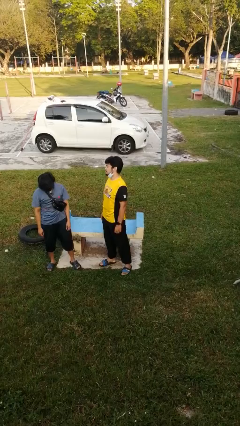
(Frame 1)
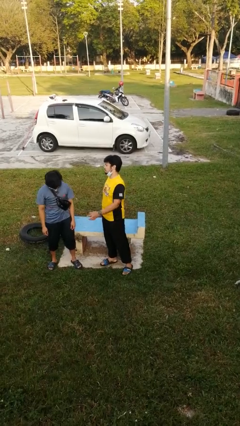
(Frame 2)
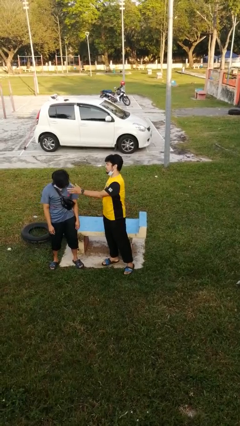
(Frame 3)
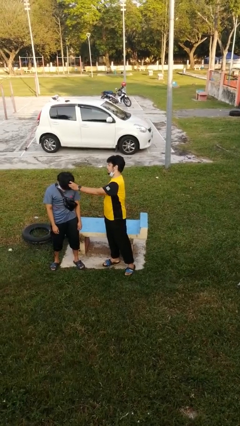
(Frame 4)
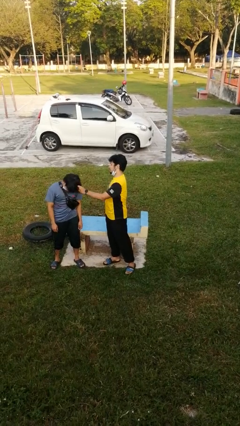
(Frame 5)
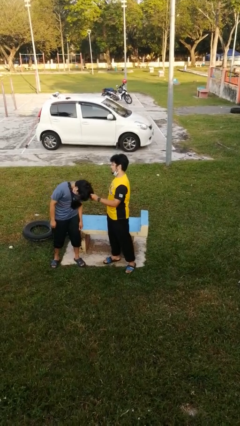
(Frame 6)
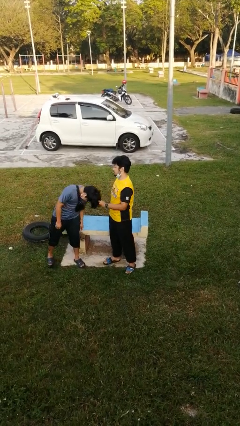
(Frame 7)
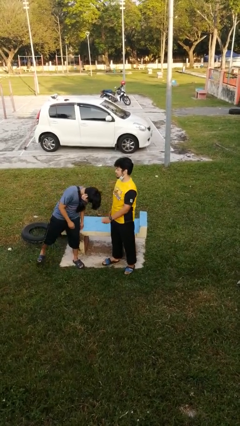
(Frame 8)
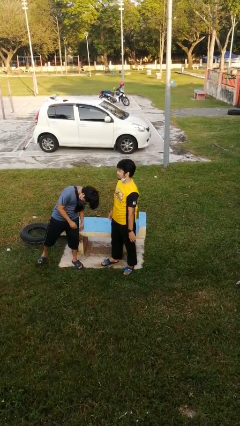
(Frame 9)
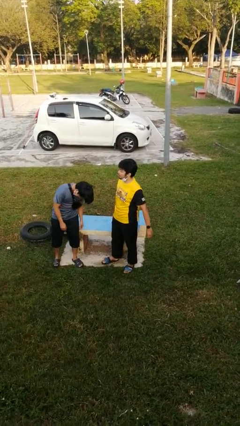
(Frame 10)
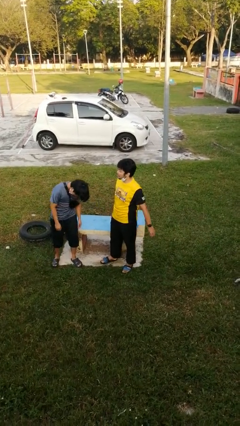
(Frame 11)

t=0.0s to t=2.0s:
person grabs person by hair

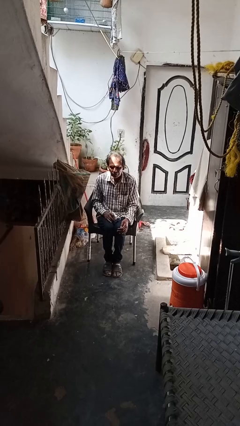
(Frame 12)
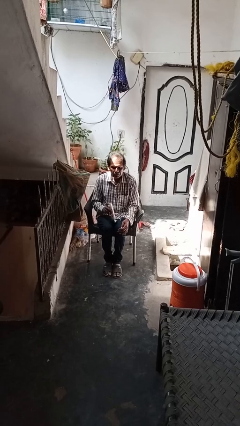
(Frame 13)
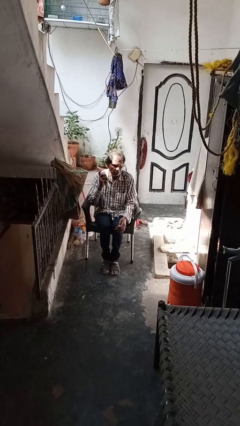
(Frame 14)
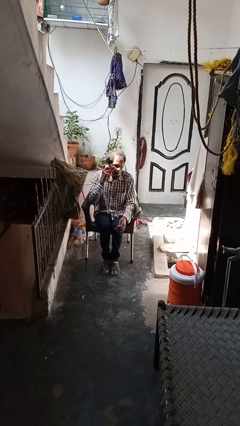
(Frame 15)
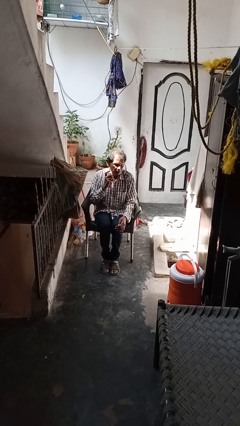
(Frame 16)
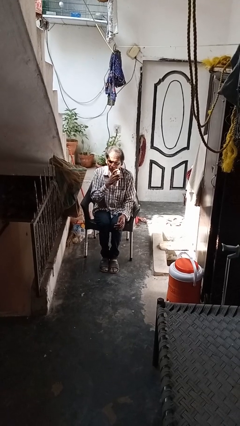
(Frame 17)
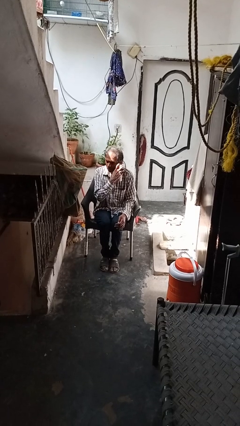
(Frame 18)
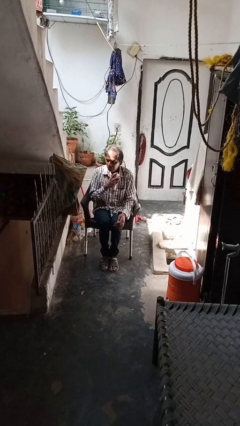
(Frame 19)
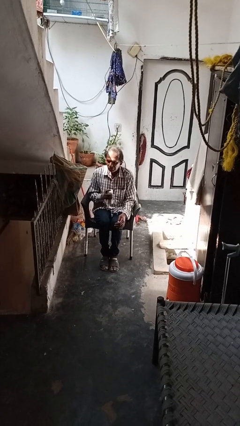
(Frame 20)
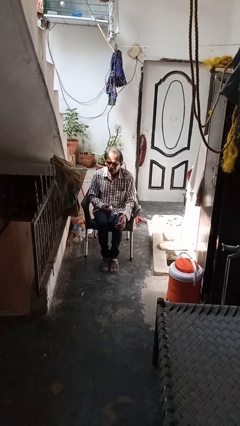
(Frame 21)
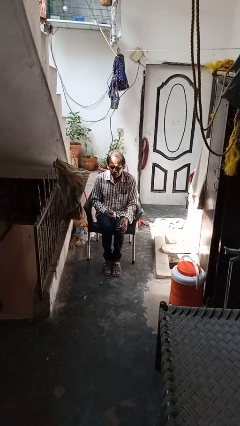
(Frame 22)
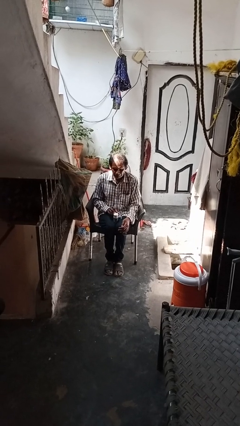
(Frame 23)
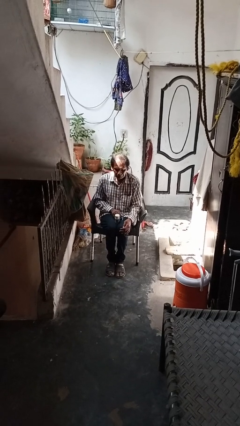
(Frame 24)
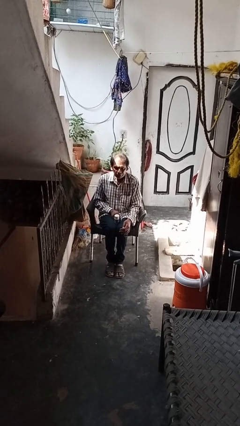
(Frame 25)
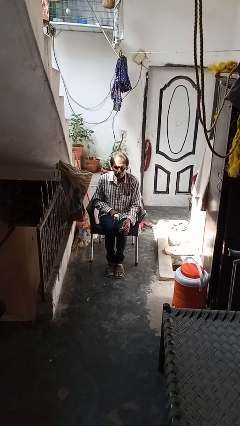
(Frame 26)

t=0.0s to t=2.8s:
person applies shaving cream

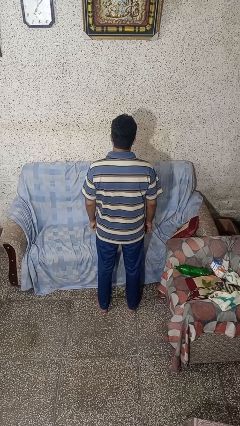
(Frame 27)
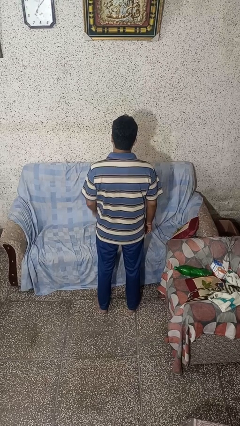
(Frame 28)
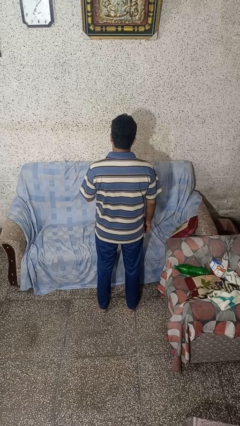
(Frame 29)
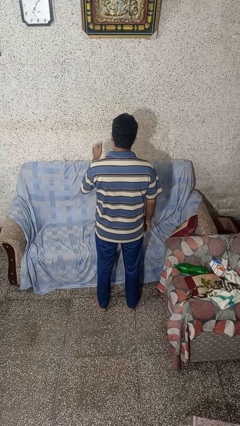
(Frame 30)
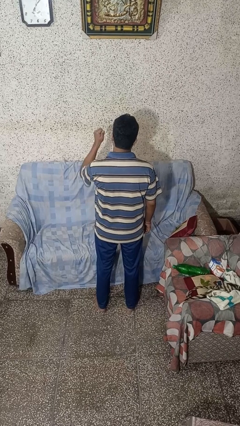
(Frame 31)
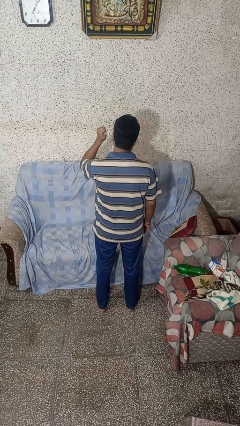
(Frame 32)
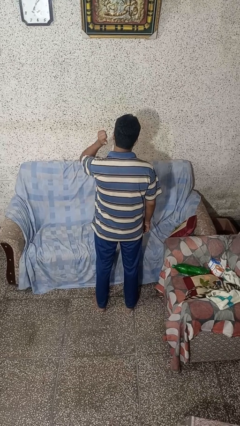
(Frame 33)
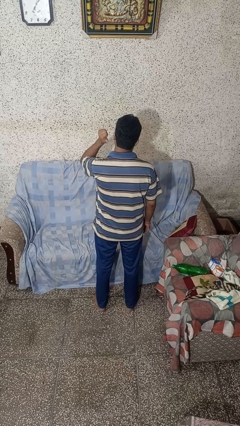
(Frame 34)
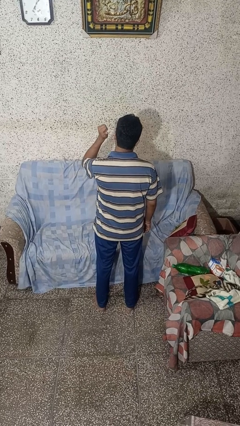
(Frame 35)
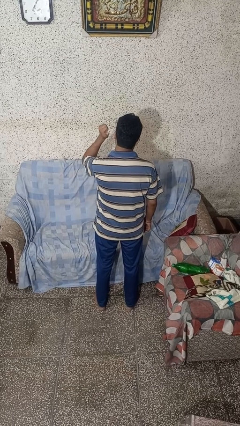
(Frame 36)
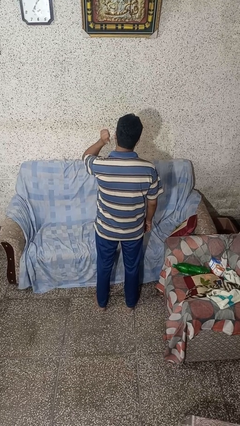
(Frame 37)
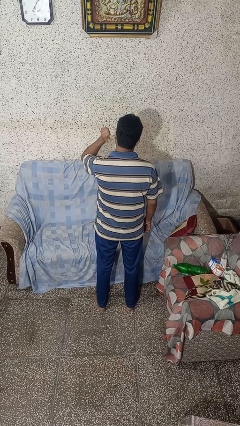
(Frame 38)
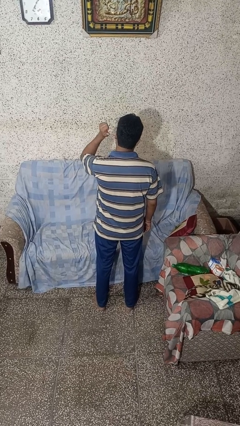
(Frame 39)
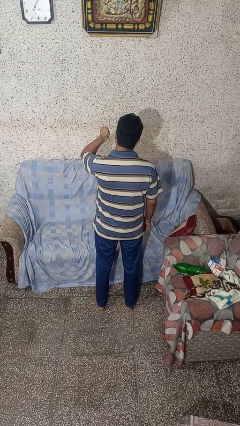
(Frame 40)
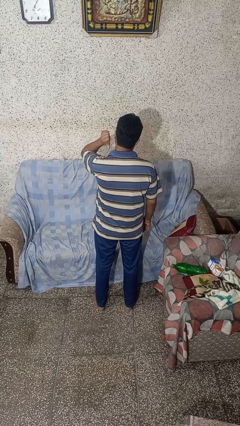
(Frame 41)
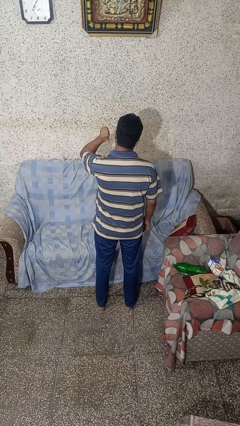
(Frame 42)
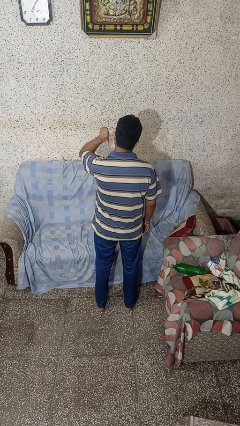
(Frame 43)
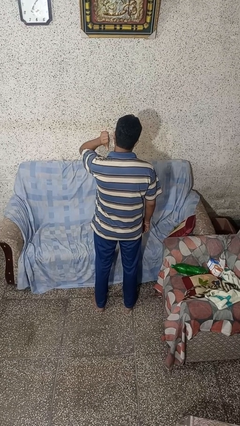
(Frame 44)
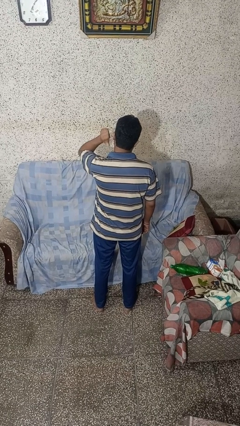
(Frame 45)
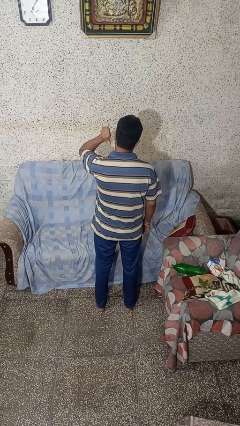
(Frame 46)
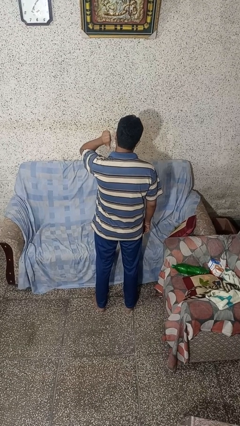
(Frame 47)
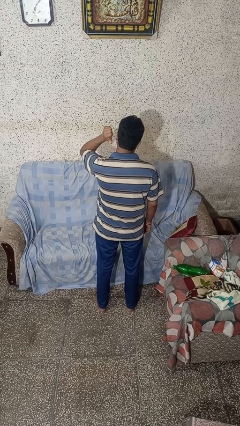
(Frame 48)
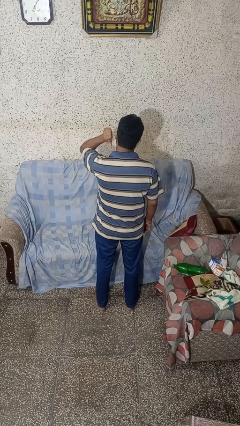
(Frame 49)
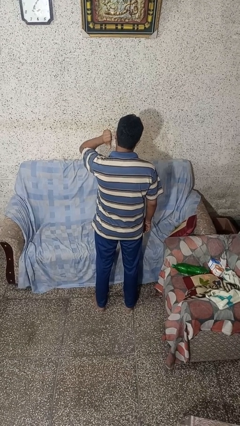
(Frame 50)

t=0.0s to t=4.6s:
person gestures behind me

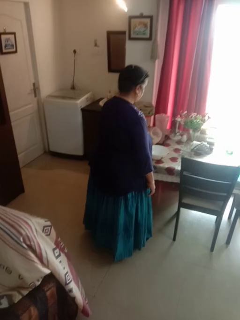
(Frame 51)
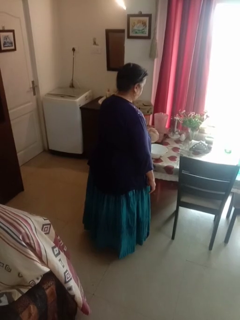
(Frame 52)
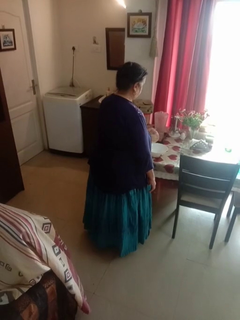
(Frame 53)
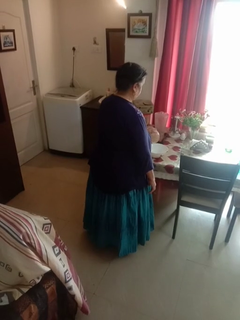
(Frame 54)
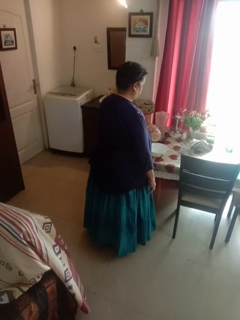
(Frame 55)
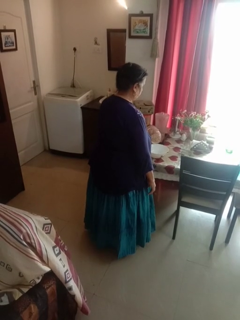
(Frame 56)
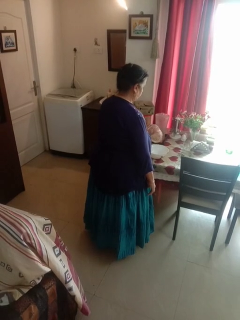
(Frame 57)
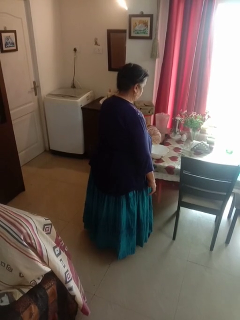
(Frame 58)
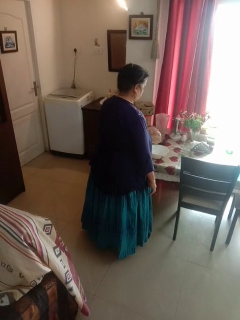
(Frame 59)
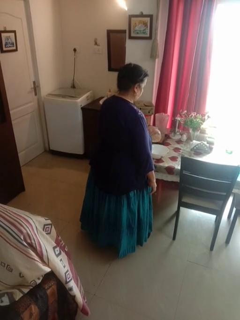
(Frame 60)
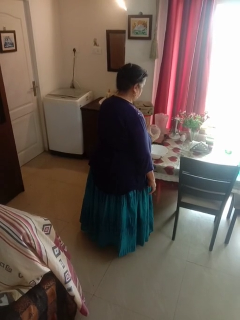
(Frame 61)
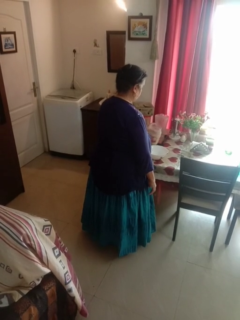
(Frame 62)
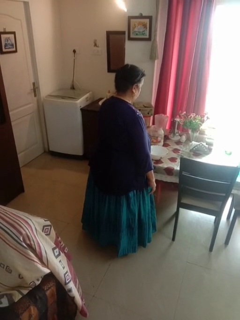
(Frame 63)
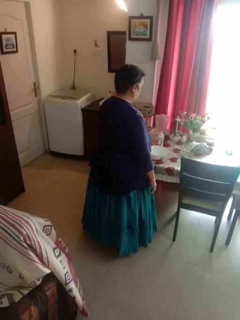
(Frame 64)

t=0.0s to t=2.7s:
person pours into bowl

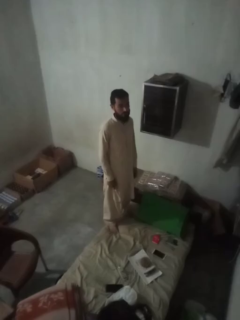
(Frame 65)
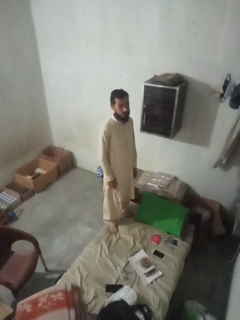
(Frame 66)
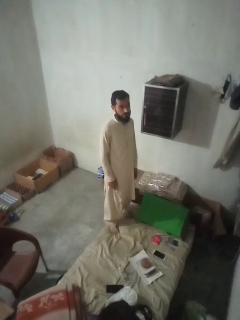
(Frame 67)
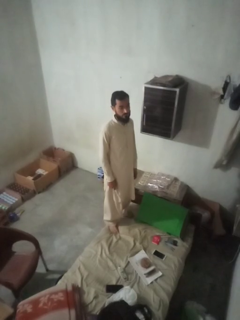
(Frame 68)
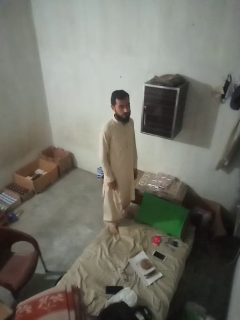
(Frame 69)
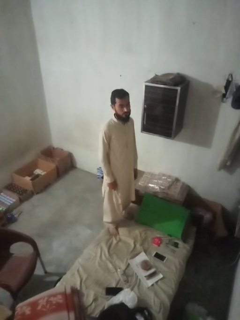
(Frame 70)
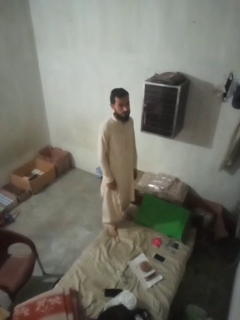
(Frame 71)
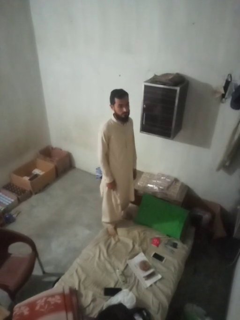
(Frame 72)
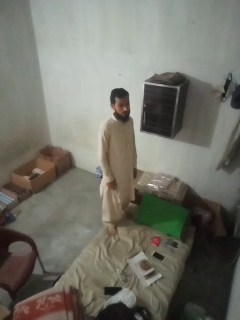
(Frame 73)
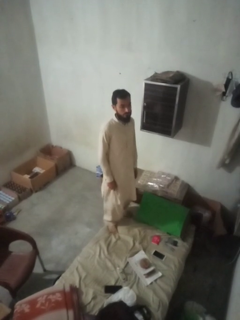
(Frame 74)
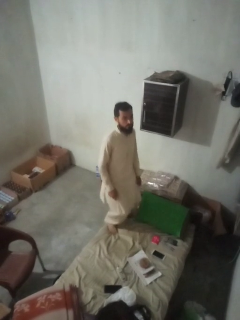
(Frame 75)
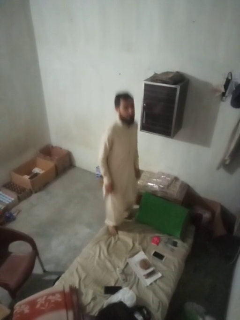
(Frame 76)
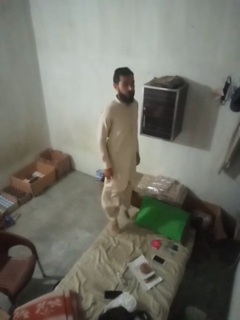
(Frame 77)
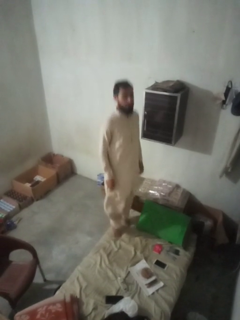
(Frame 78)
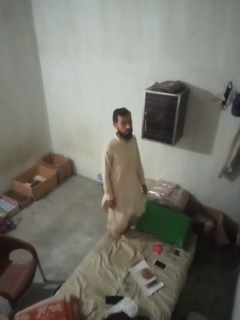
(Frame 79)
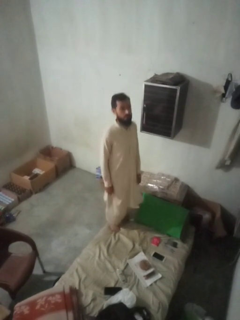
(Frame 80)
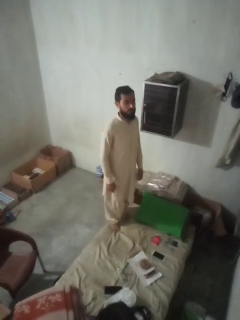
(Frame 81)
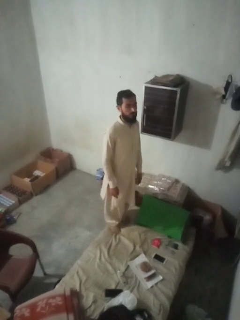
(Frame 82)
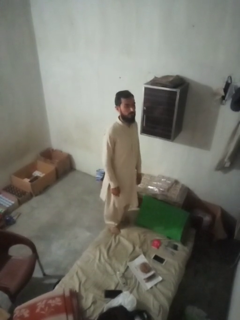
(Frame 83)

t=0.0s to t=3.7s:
person jumps on couch

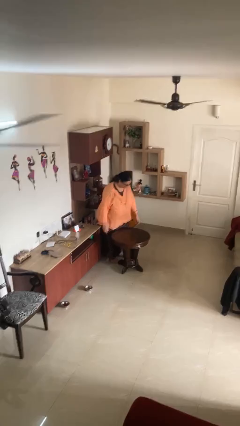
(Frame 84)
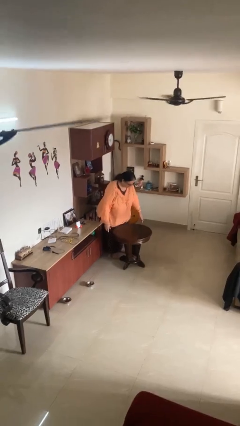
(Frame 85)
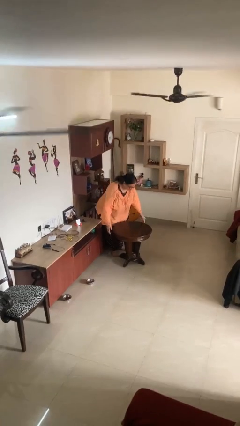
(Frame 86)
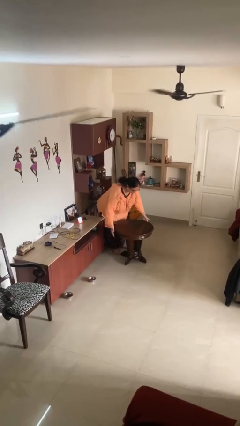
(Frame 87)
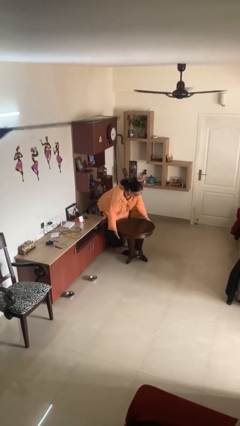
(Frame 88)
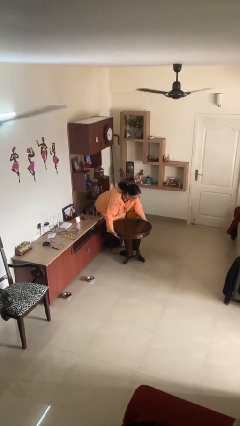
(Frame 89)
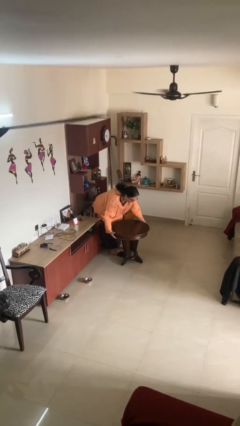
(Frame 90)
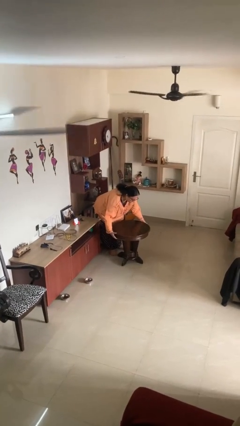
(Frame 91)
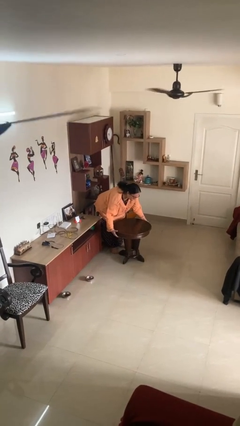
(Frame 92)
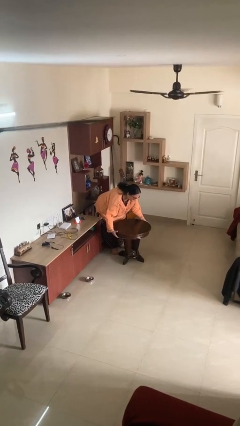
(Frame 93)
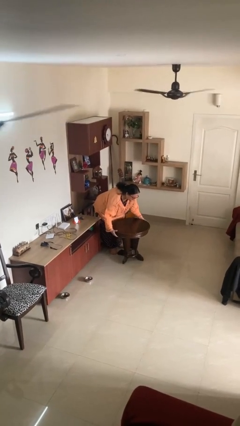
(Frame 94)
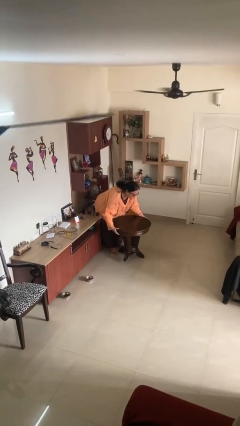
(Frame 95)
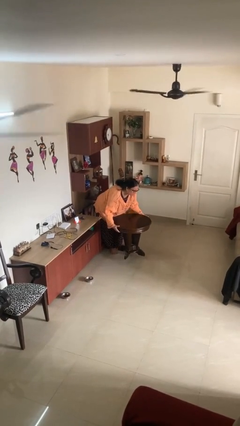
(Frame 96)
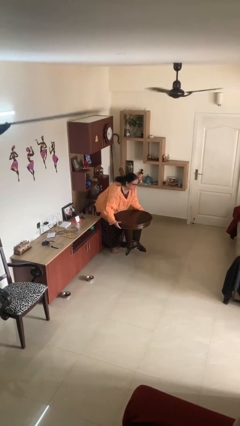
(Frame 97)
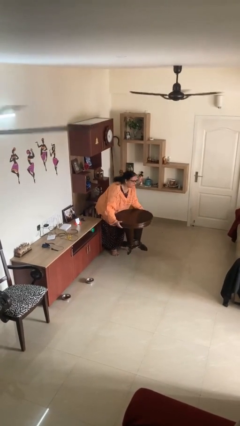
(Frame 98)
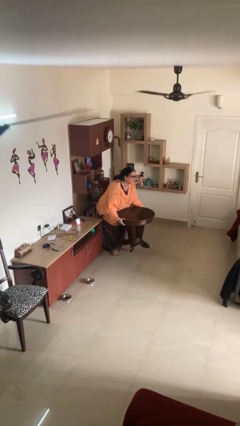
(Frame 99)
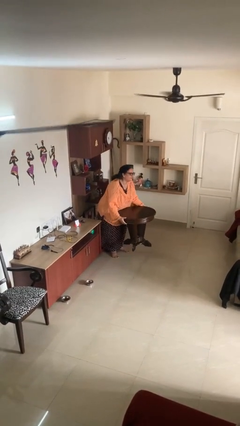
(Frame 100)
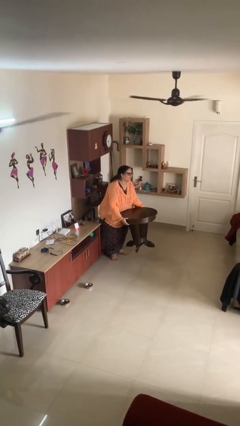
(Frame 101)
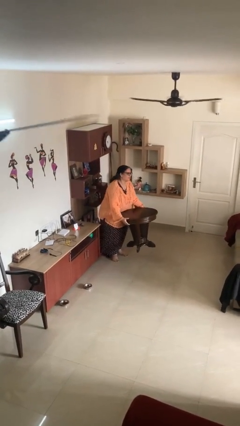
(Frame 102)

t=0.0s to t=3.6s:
person picks up object from floor
